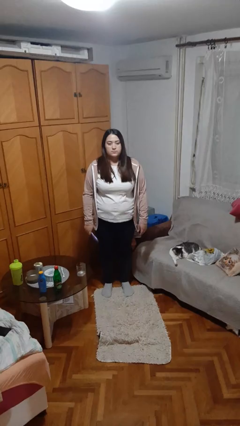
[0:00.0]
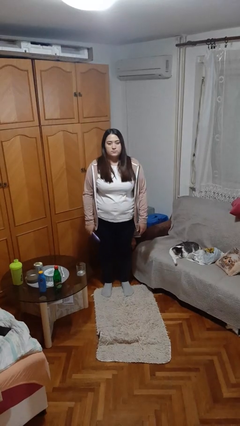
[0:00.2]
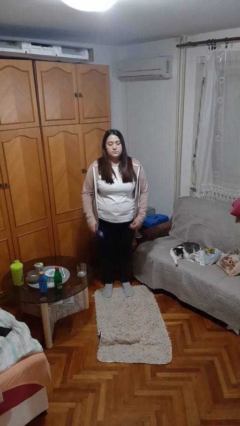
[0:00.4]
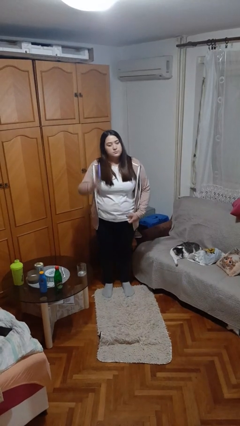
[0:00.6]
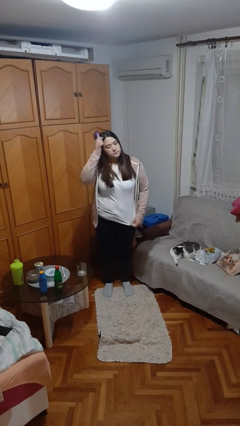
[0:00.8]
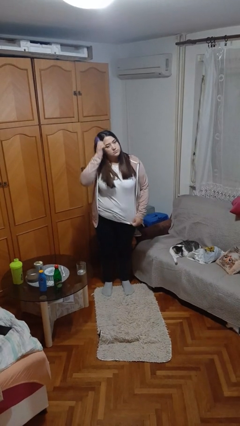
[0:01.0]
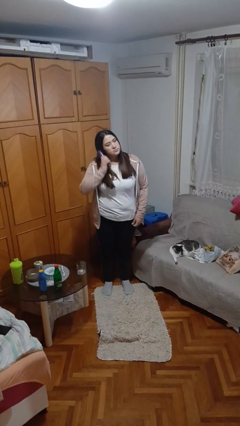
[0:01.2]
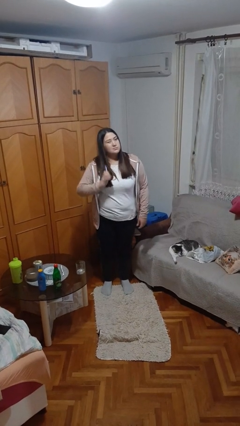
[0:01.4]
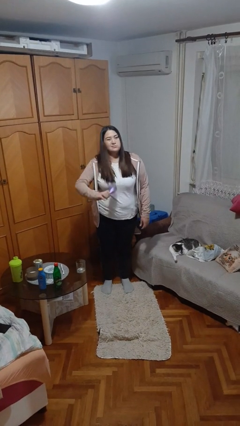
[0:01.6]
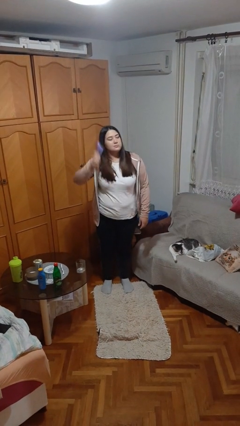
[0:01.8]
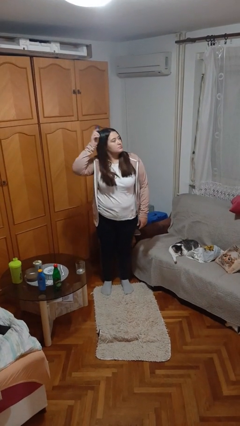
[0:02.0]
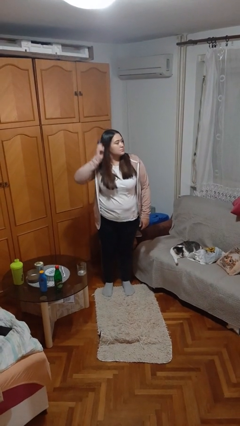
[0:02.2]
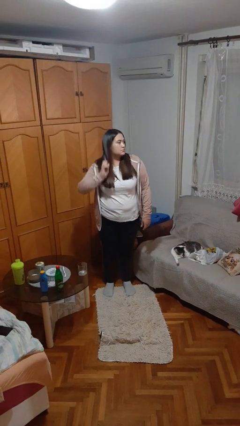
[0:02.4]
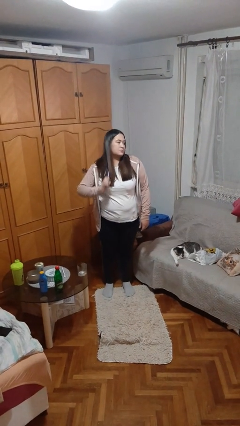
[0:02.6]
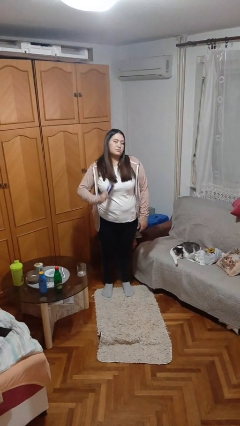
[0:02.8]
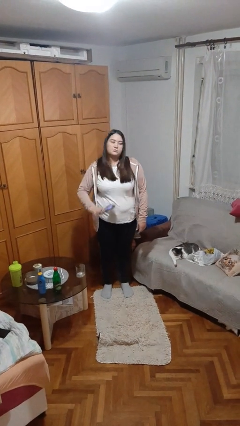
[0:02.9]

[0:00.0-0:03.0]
person brushes hair

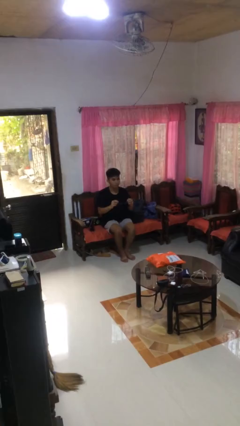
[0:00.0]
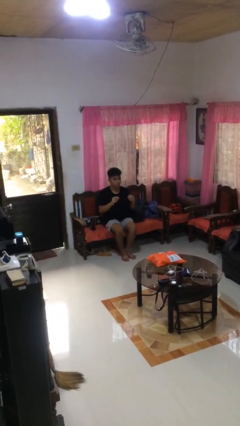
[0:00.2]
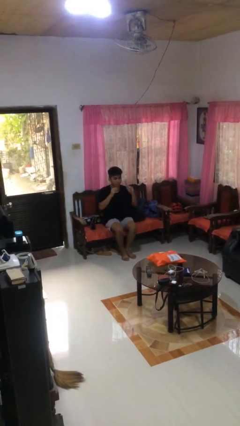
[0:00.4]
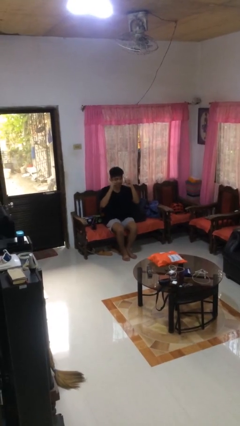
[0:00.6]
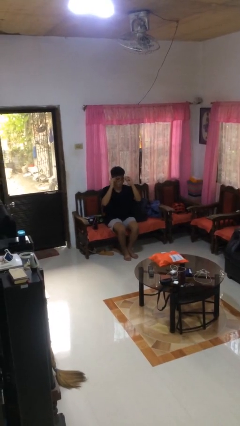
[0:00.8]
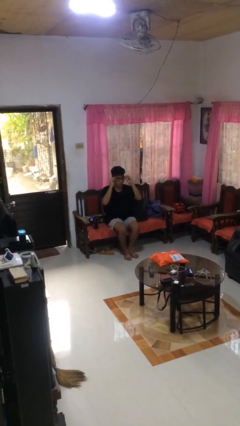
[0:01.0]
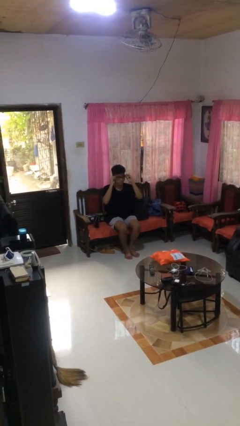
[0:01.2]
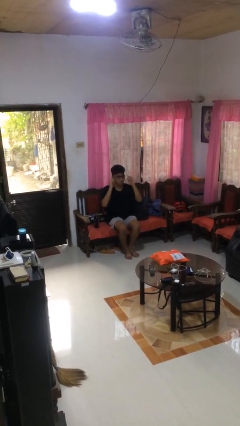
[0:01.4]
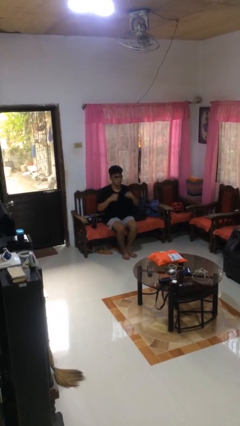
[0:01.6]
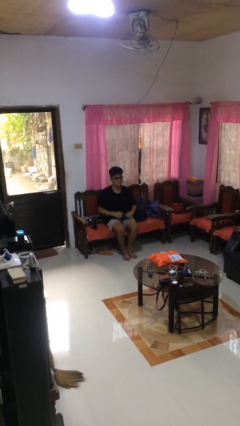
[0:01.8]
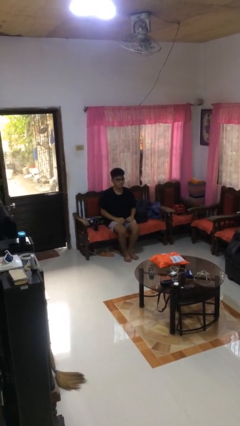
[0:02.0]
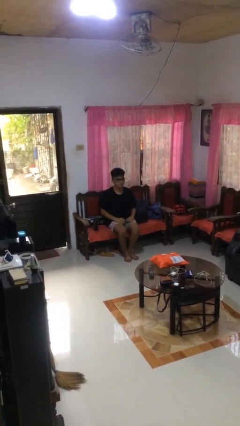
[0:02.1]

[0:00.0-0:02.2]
person puts on glasses

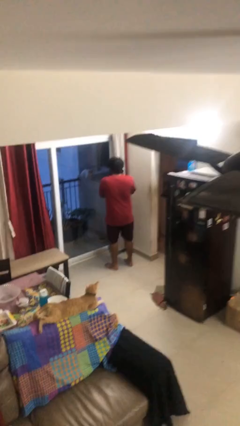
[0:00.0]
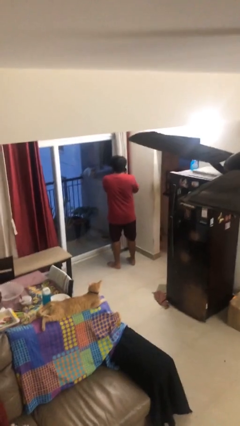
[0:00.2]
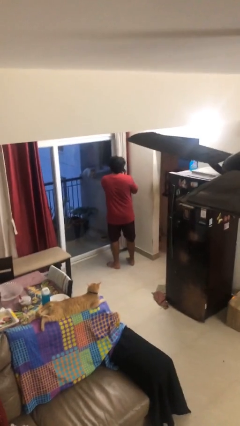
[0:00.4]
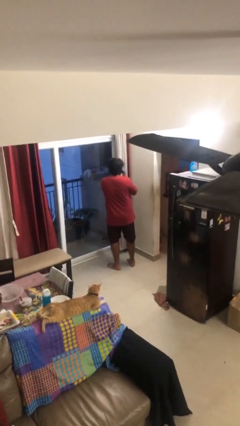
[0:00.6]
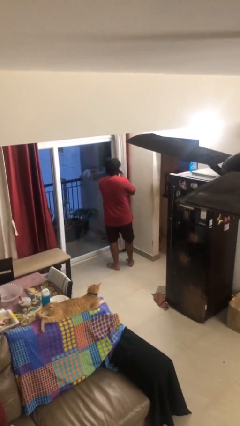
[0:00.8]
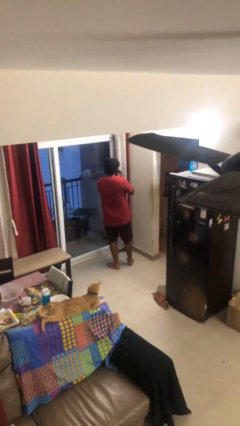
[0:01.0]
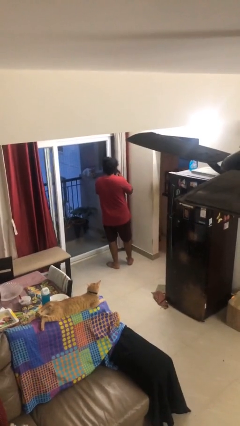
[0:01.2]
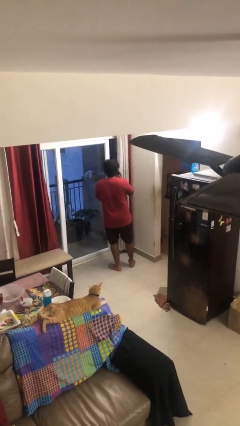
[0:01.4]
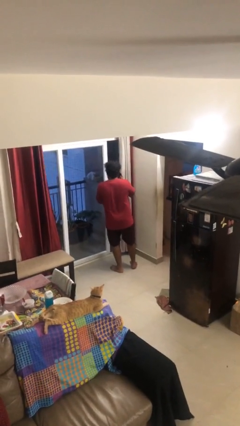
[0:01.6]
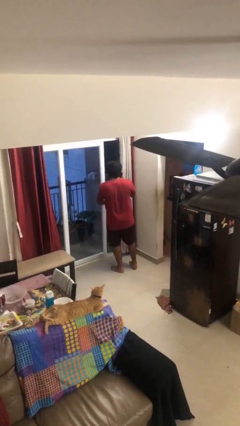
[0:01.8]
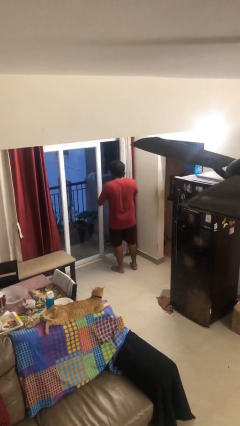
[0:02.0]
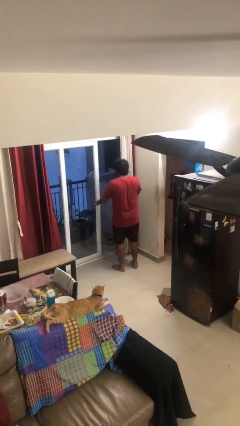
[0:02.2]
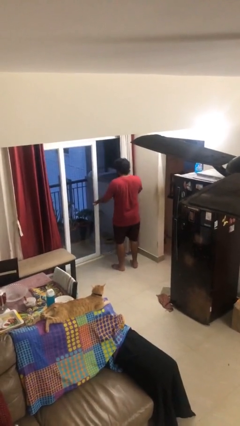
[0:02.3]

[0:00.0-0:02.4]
person opens facility door

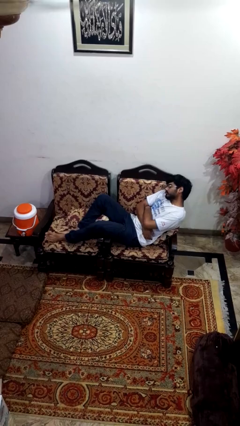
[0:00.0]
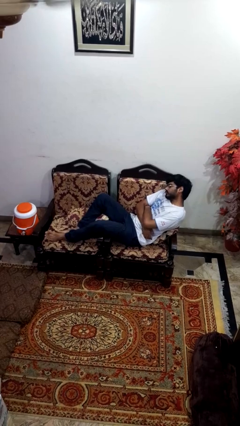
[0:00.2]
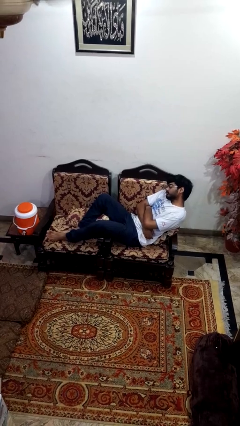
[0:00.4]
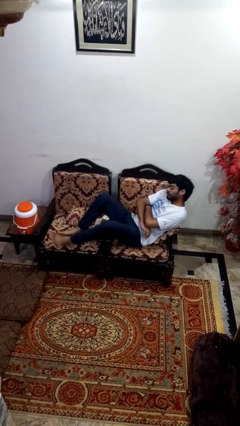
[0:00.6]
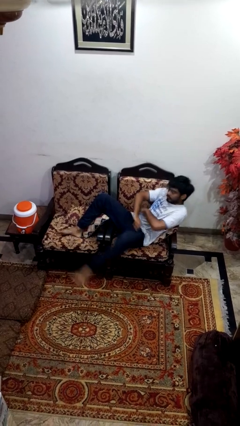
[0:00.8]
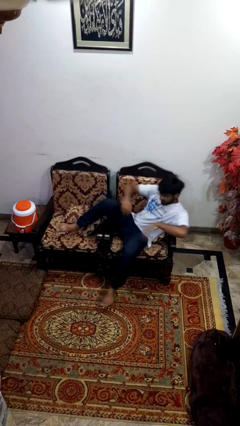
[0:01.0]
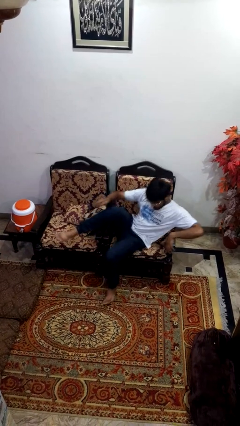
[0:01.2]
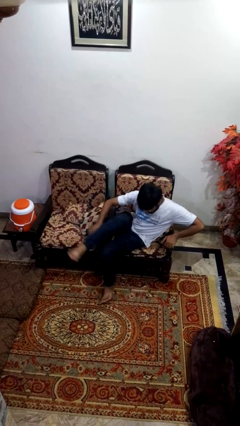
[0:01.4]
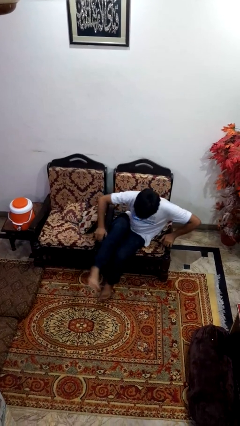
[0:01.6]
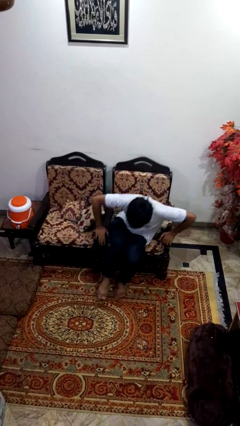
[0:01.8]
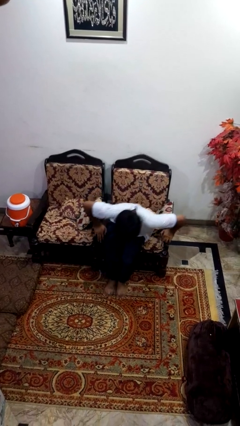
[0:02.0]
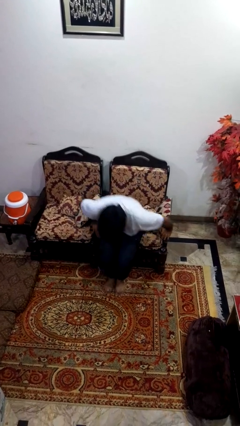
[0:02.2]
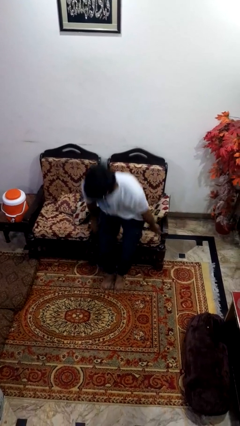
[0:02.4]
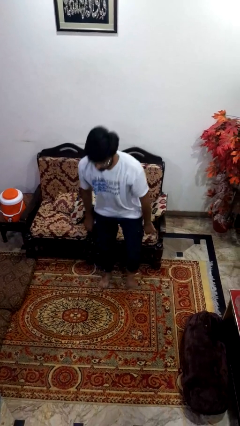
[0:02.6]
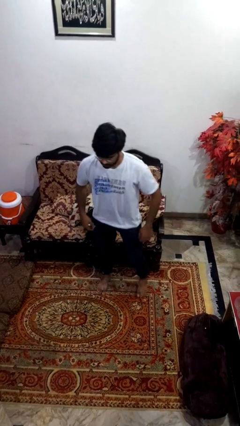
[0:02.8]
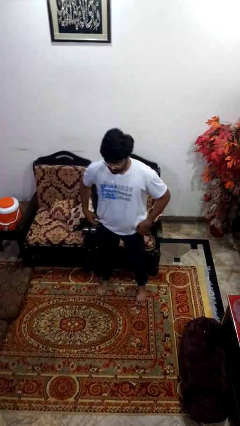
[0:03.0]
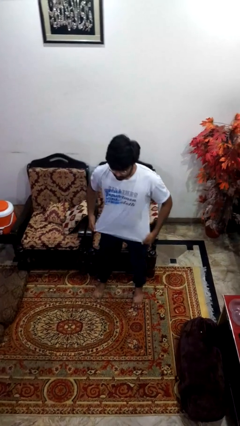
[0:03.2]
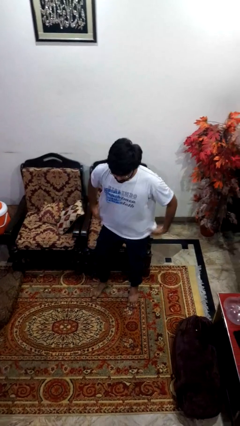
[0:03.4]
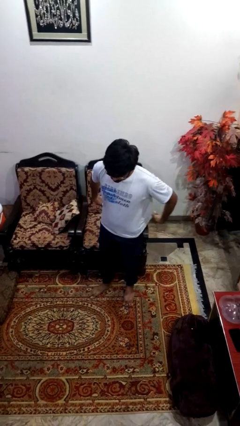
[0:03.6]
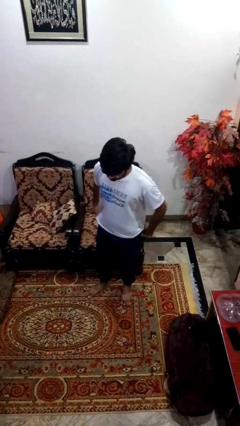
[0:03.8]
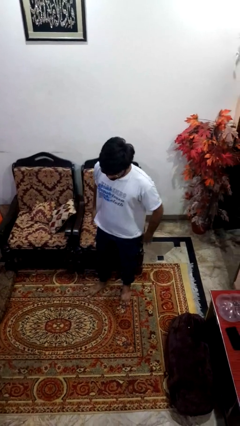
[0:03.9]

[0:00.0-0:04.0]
person stands up

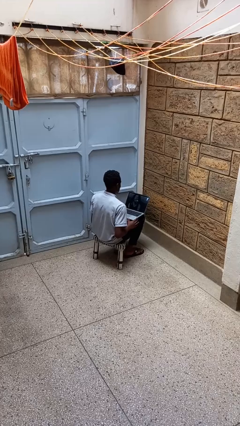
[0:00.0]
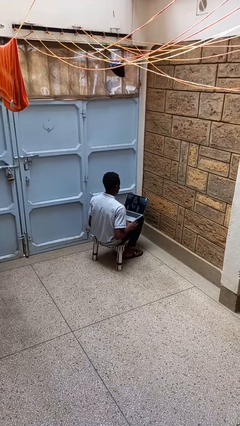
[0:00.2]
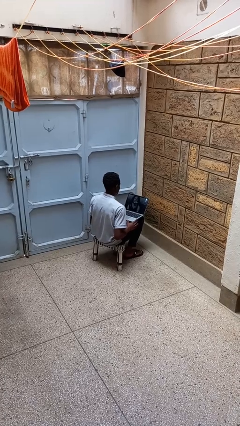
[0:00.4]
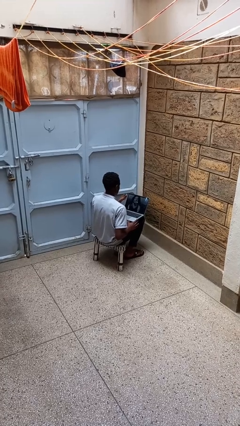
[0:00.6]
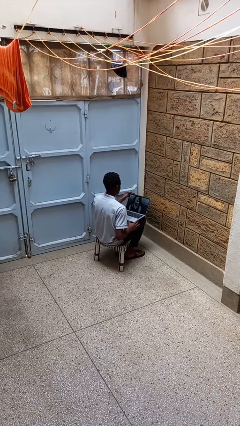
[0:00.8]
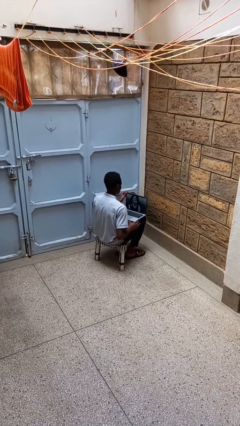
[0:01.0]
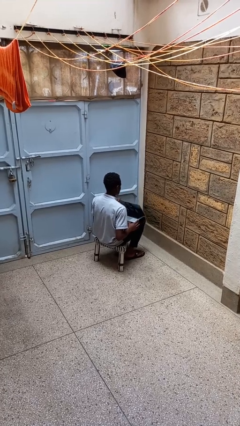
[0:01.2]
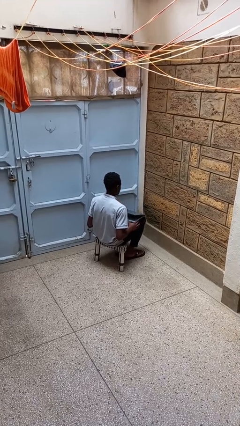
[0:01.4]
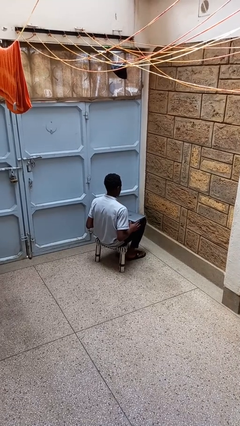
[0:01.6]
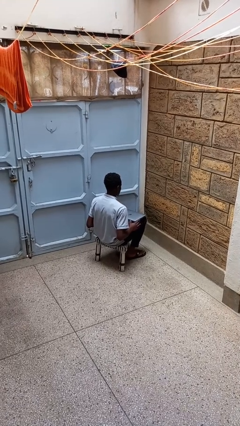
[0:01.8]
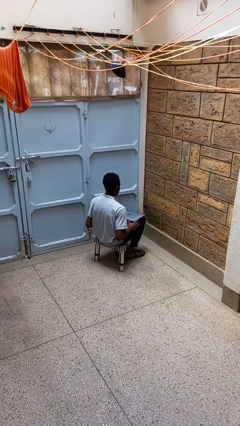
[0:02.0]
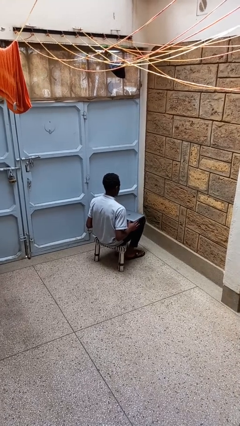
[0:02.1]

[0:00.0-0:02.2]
person closes laptop

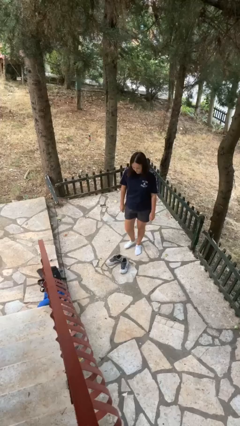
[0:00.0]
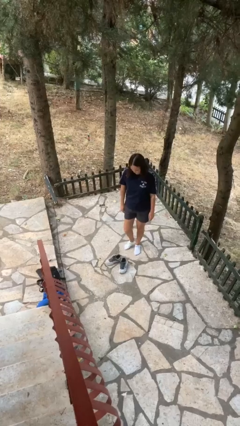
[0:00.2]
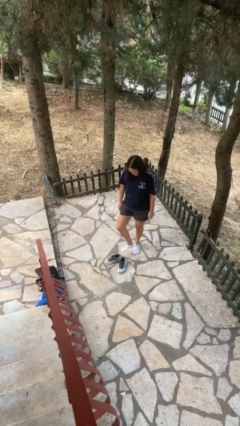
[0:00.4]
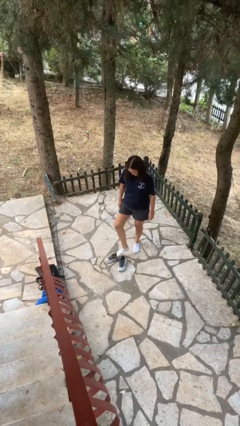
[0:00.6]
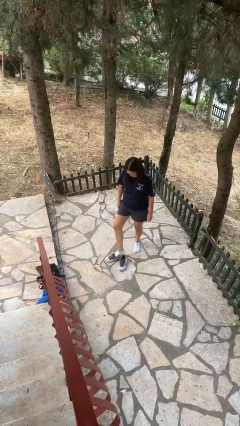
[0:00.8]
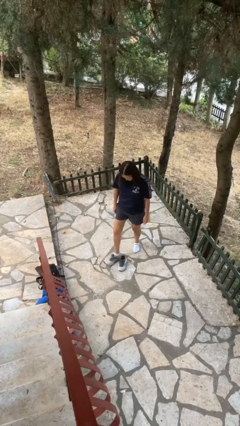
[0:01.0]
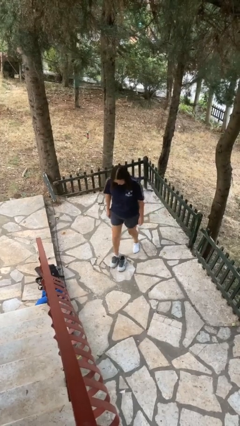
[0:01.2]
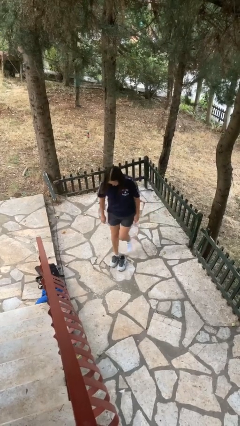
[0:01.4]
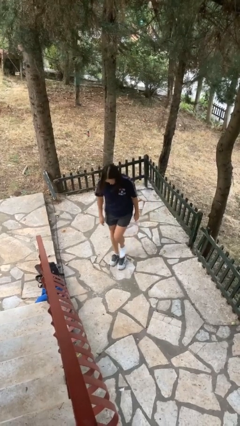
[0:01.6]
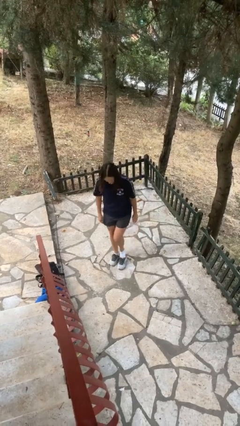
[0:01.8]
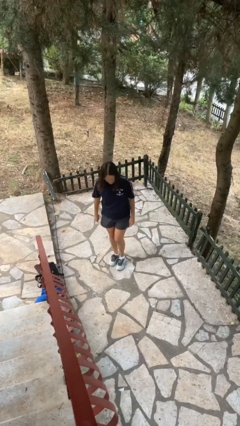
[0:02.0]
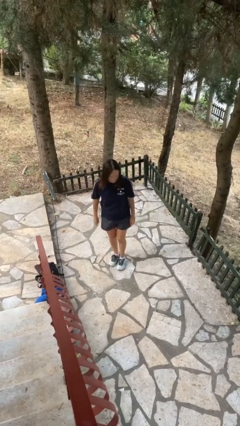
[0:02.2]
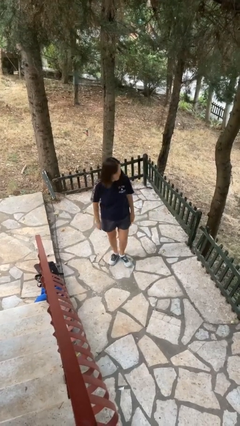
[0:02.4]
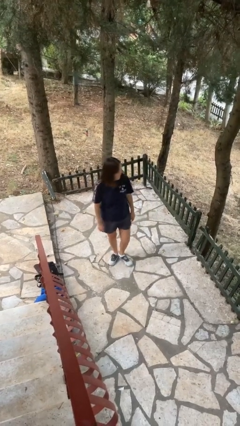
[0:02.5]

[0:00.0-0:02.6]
person puts on shoes

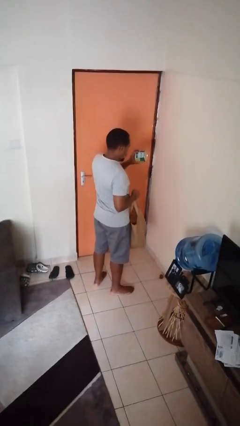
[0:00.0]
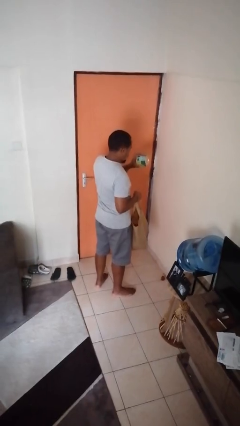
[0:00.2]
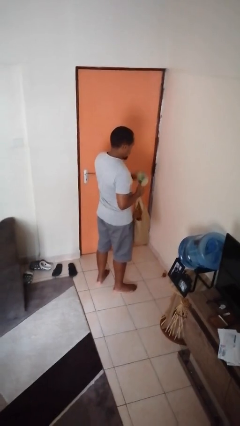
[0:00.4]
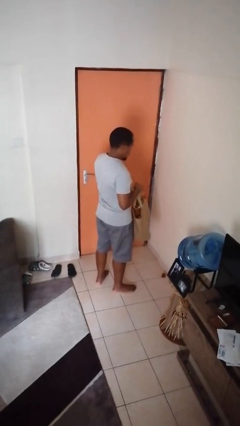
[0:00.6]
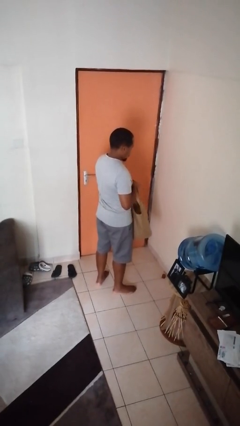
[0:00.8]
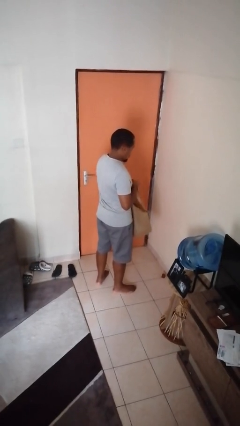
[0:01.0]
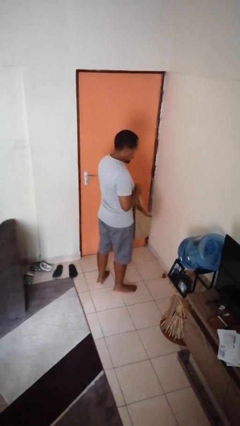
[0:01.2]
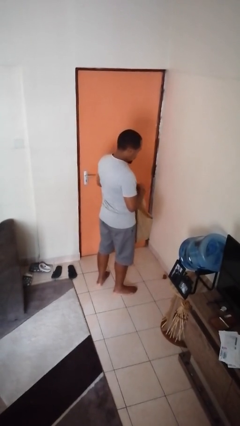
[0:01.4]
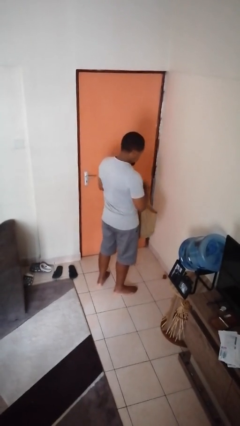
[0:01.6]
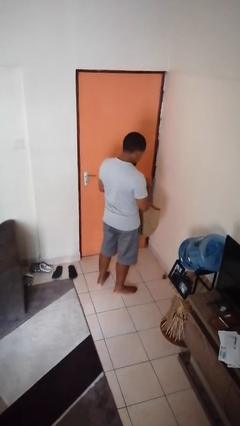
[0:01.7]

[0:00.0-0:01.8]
person puts object into bag
